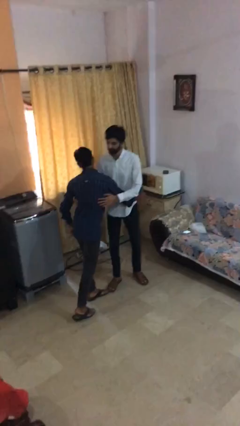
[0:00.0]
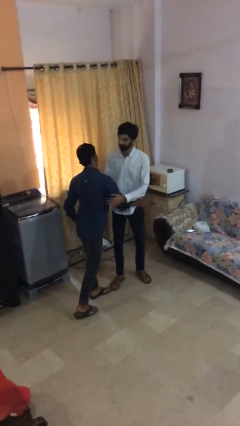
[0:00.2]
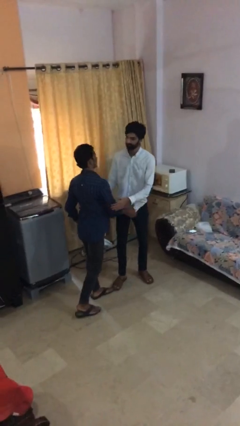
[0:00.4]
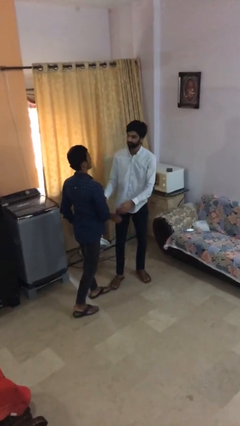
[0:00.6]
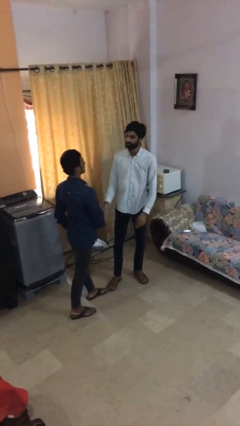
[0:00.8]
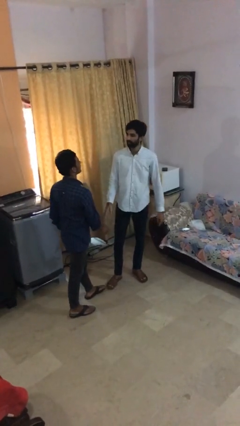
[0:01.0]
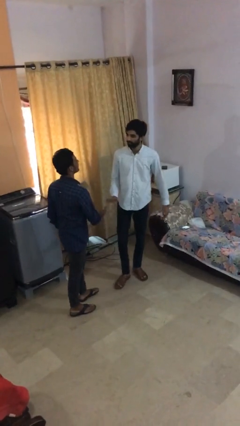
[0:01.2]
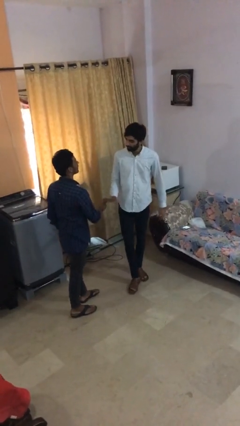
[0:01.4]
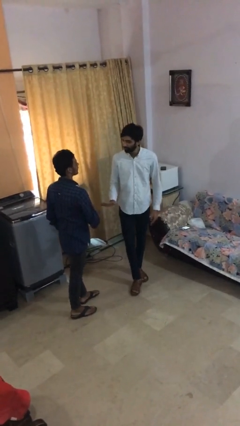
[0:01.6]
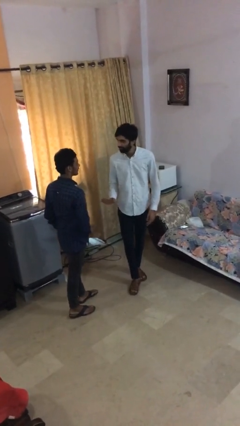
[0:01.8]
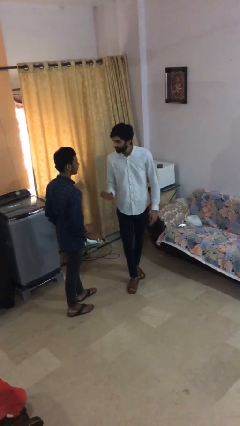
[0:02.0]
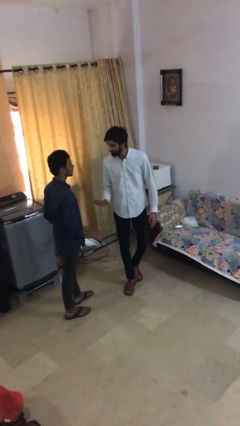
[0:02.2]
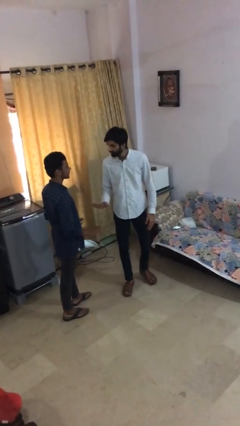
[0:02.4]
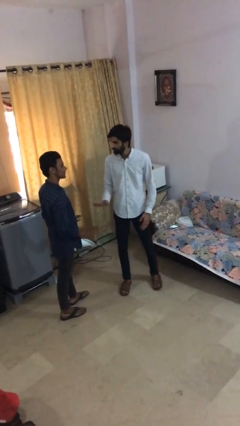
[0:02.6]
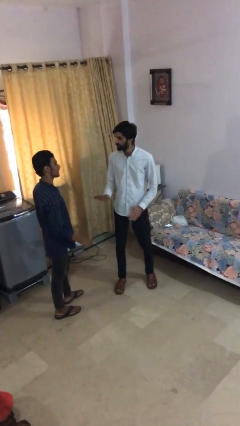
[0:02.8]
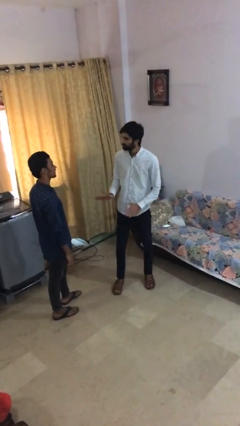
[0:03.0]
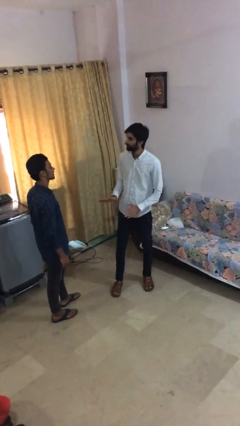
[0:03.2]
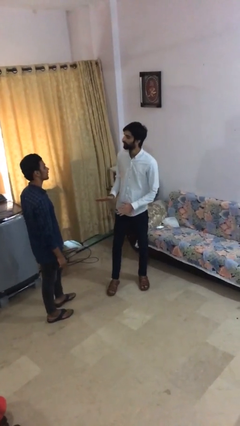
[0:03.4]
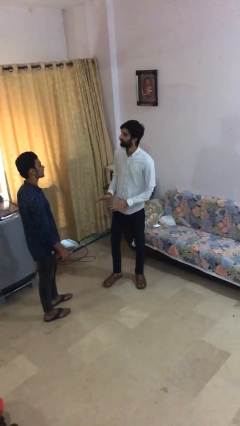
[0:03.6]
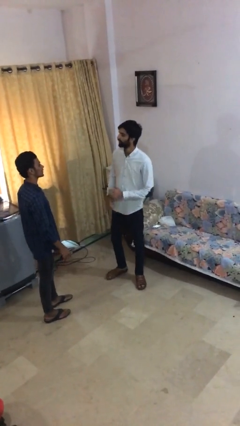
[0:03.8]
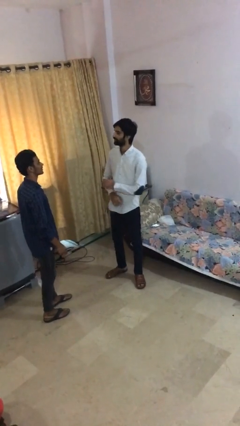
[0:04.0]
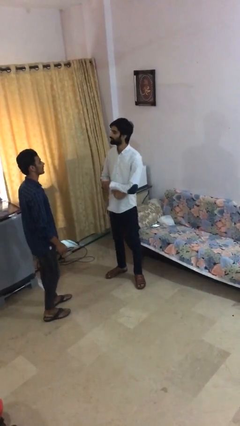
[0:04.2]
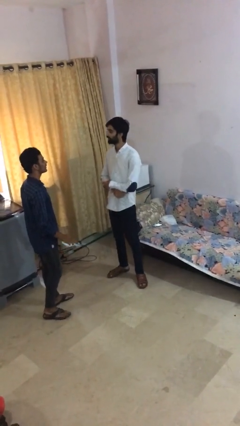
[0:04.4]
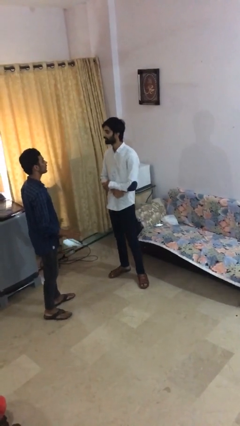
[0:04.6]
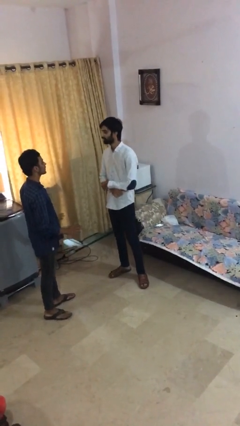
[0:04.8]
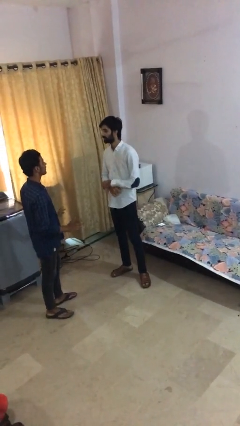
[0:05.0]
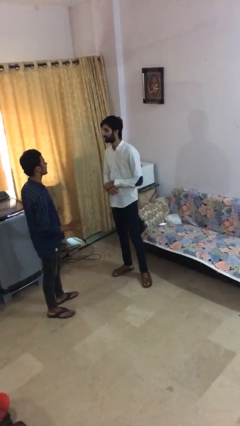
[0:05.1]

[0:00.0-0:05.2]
person talks to person

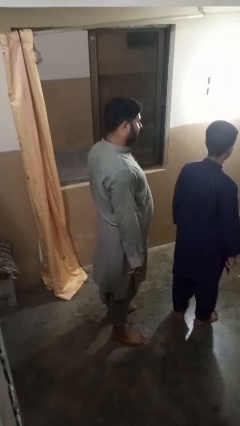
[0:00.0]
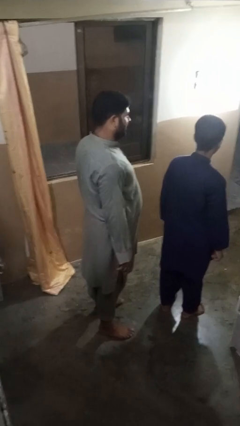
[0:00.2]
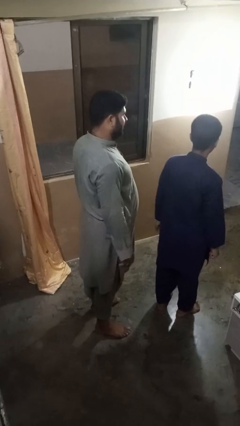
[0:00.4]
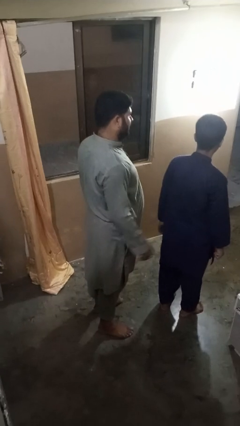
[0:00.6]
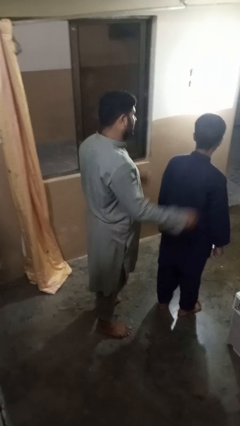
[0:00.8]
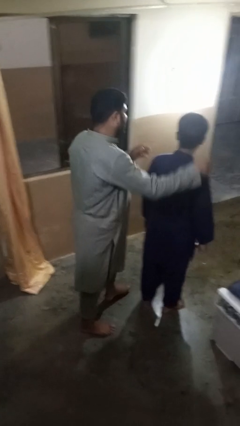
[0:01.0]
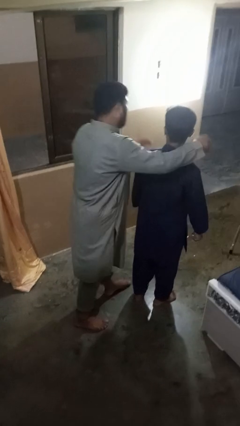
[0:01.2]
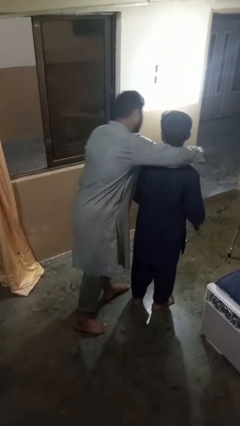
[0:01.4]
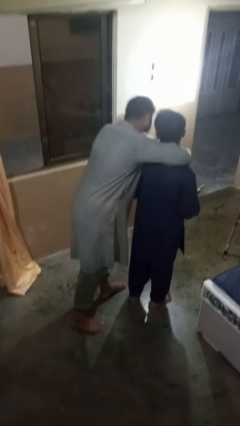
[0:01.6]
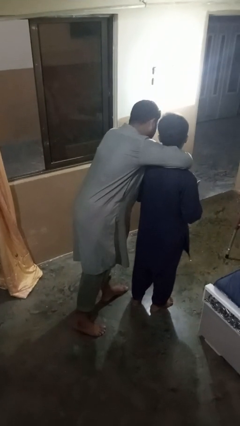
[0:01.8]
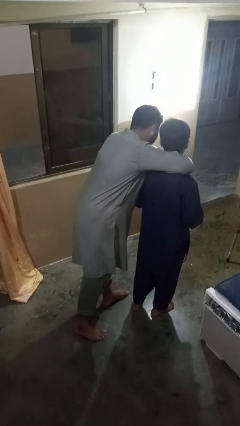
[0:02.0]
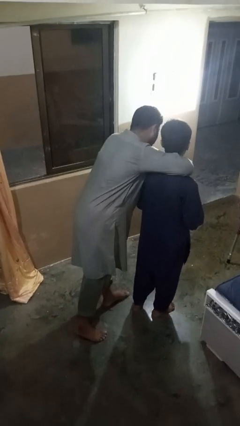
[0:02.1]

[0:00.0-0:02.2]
person hugs person from behind

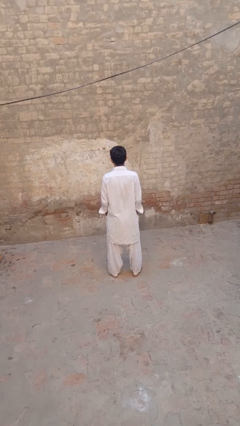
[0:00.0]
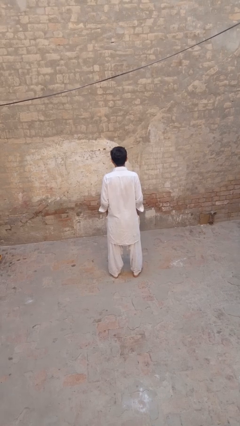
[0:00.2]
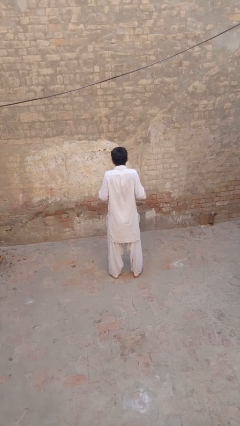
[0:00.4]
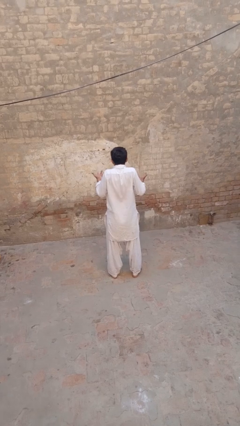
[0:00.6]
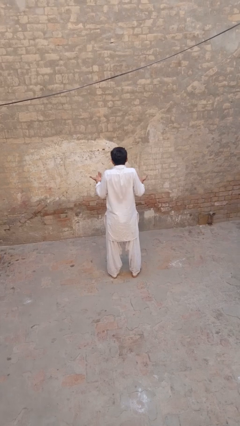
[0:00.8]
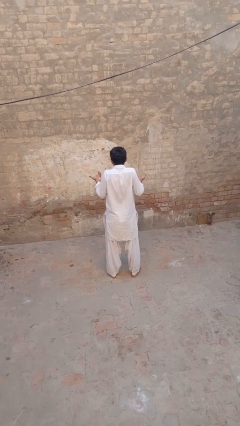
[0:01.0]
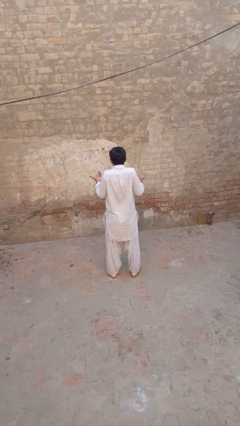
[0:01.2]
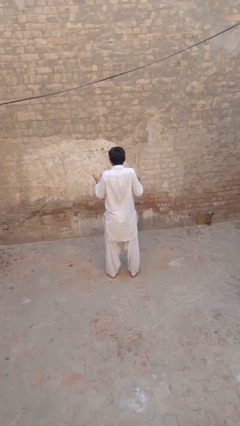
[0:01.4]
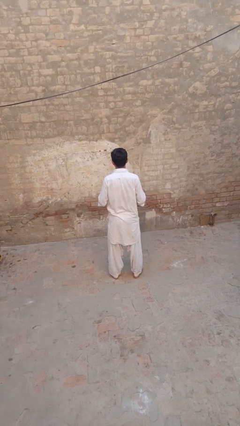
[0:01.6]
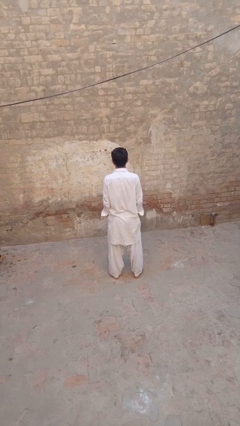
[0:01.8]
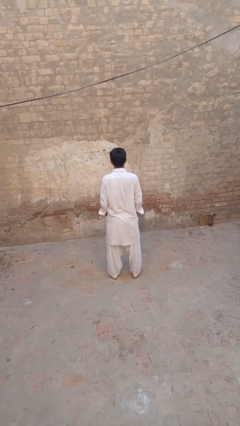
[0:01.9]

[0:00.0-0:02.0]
person shrugs

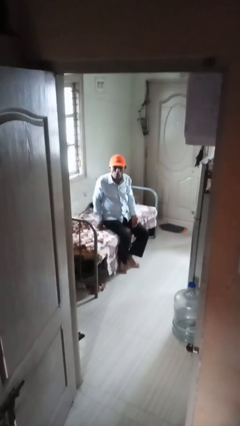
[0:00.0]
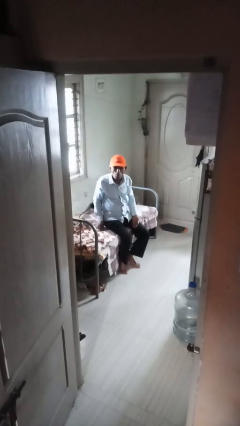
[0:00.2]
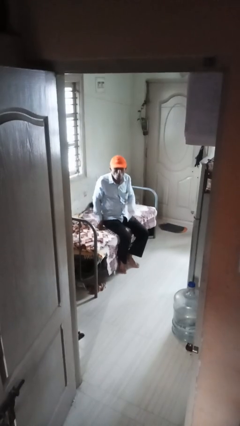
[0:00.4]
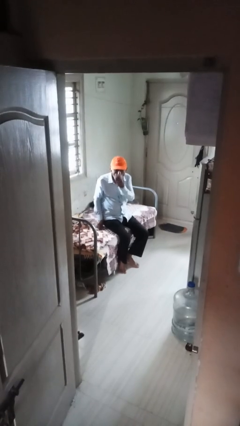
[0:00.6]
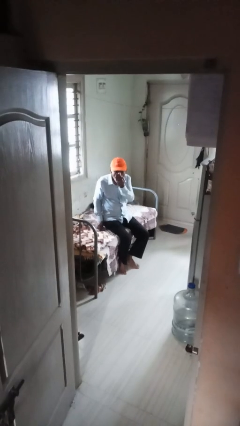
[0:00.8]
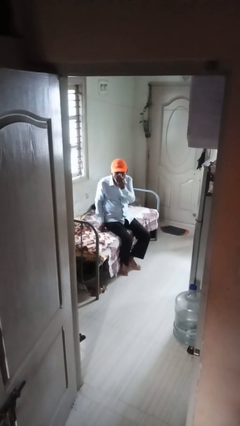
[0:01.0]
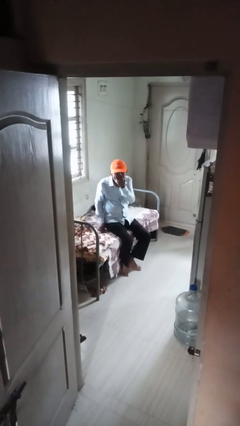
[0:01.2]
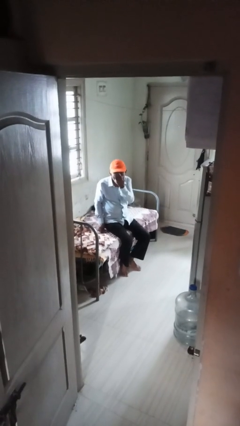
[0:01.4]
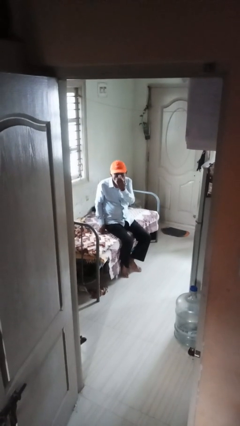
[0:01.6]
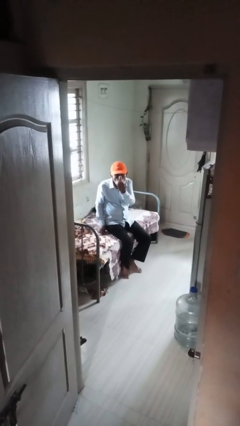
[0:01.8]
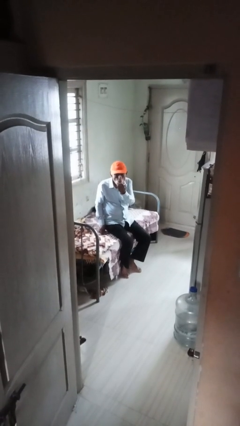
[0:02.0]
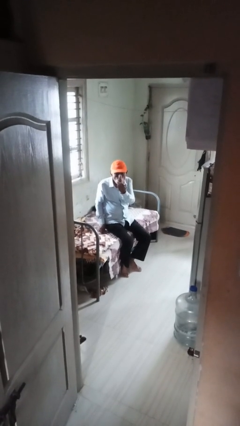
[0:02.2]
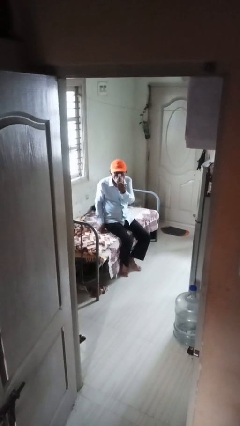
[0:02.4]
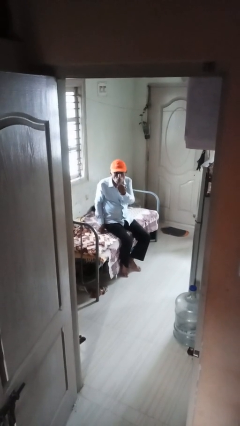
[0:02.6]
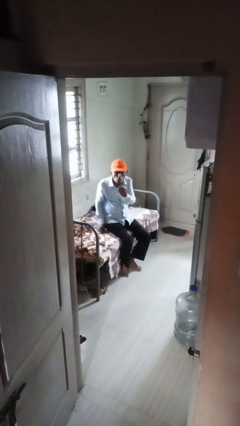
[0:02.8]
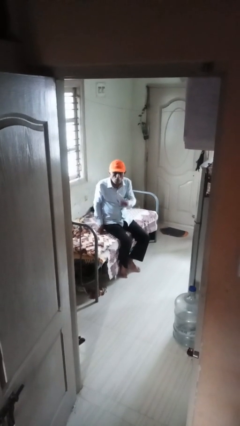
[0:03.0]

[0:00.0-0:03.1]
person gestures blow kiss

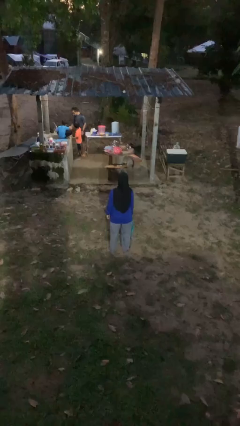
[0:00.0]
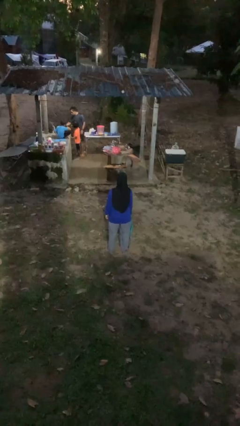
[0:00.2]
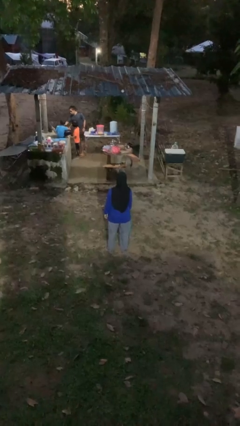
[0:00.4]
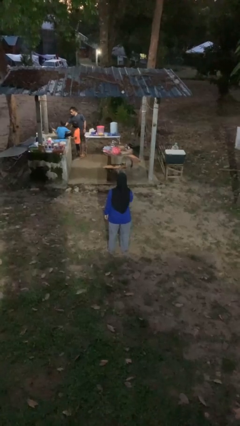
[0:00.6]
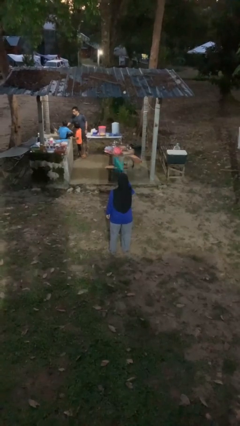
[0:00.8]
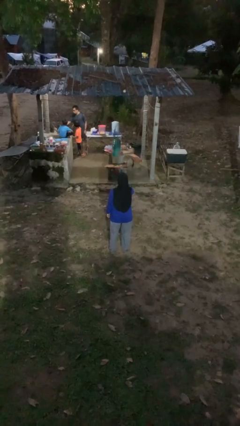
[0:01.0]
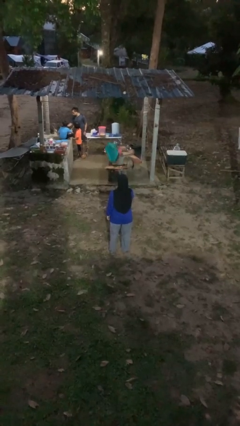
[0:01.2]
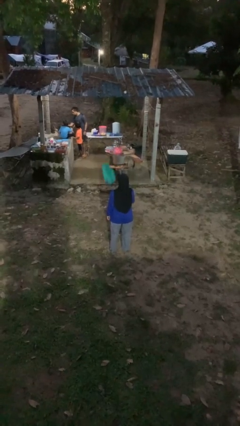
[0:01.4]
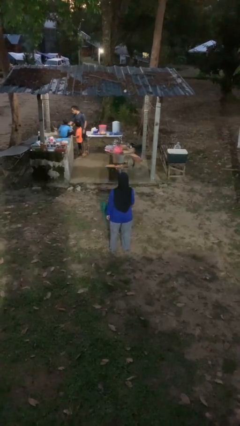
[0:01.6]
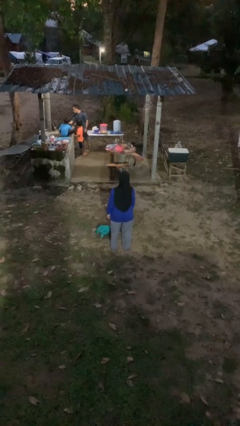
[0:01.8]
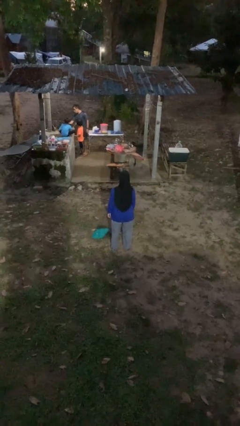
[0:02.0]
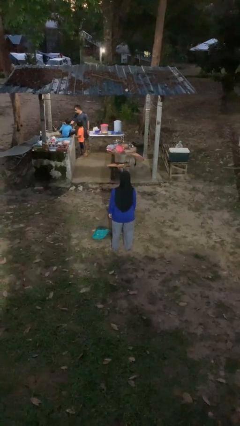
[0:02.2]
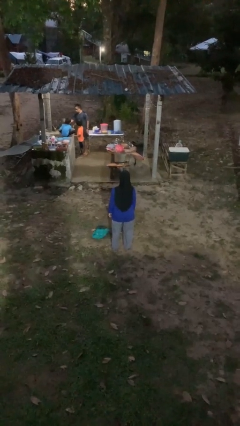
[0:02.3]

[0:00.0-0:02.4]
person throws object into air

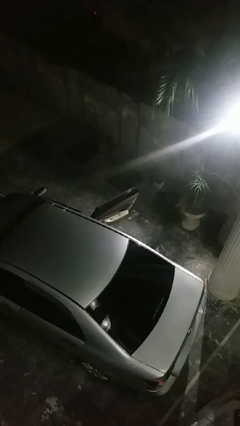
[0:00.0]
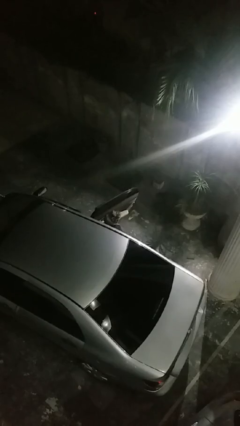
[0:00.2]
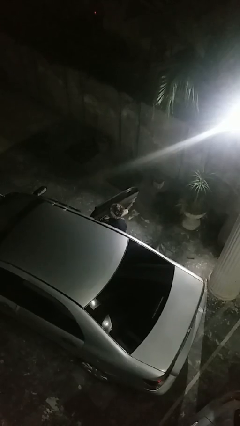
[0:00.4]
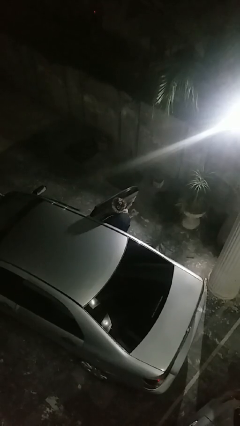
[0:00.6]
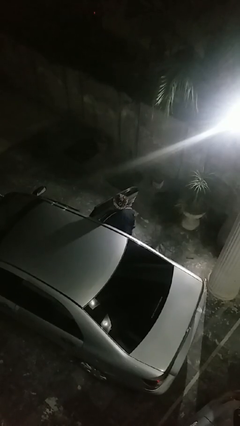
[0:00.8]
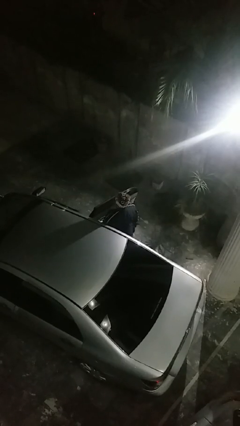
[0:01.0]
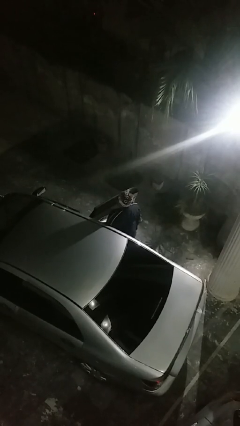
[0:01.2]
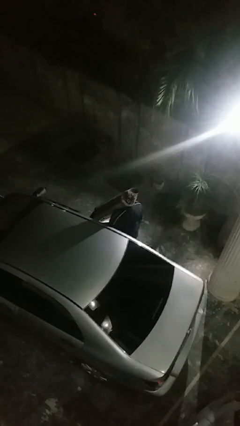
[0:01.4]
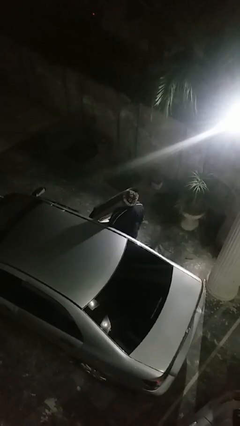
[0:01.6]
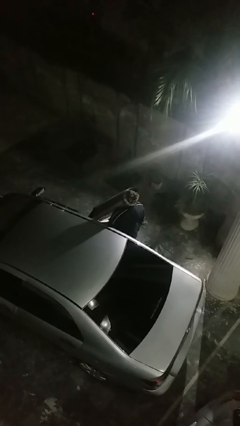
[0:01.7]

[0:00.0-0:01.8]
person exits car

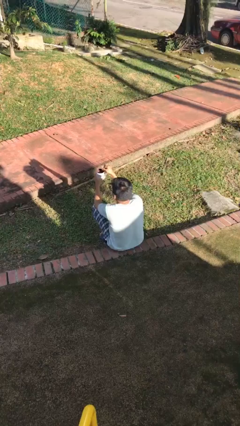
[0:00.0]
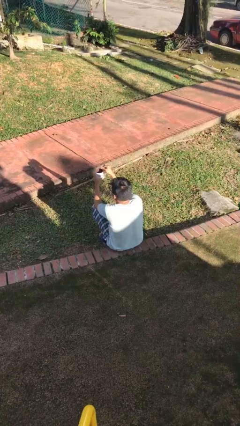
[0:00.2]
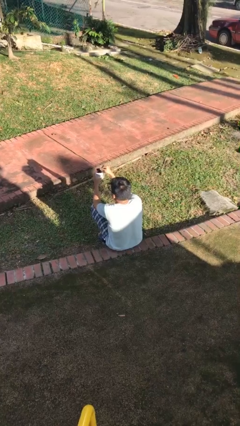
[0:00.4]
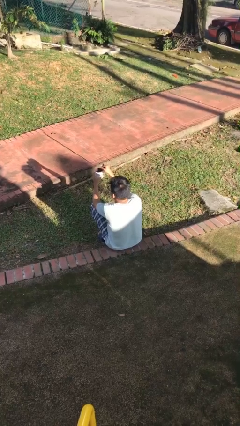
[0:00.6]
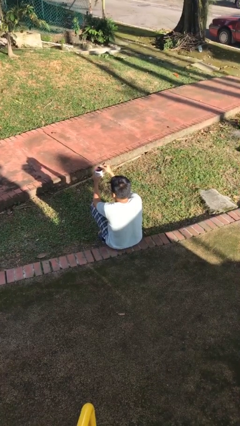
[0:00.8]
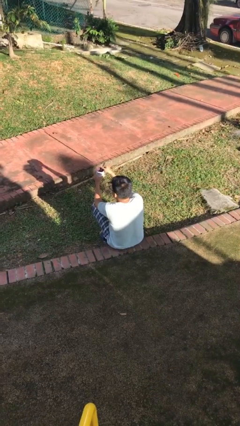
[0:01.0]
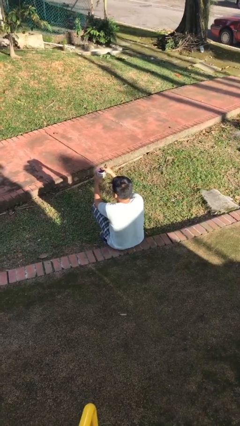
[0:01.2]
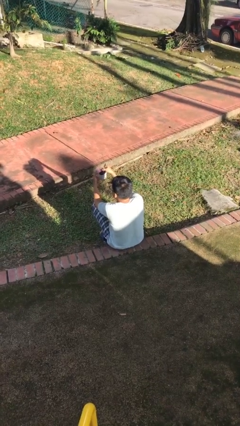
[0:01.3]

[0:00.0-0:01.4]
person stirs mug
